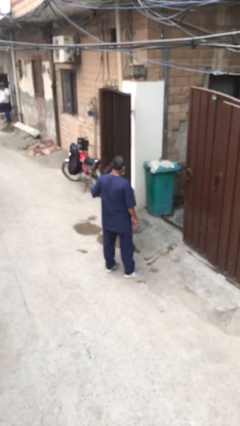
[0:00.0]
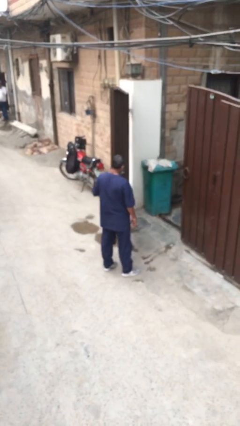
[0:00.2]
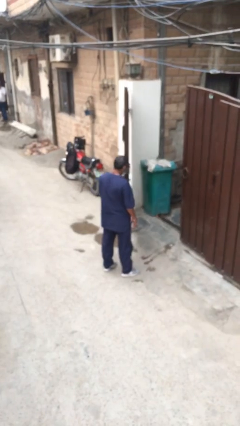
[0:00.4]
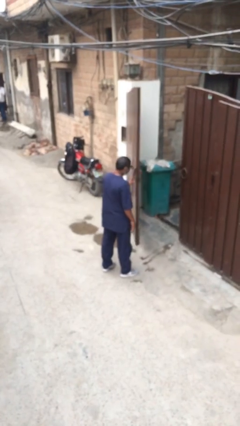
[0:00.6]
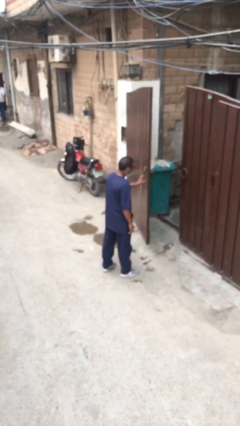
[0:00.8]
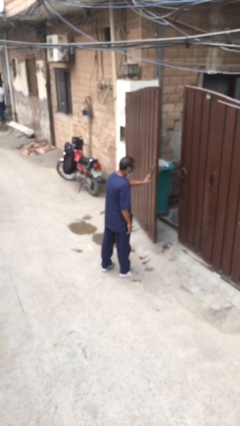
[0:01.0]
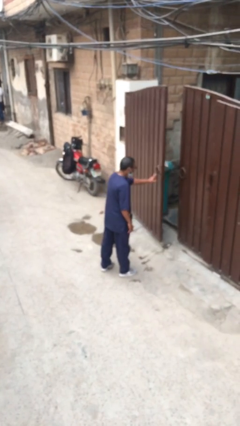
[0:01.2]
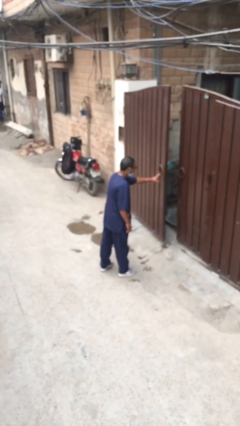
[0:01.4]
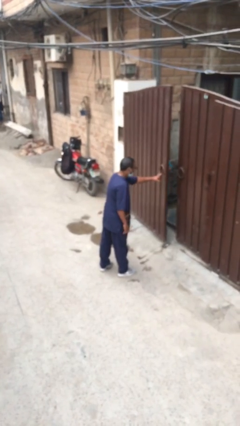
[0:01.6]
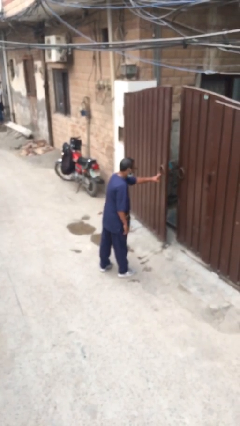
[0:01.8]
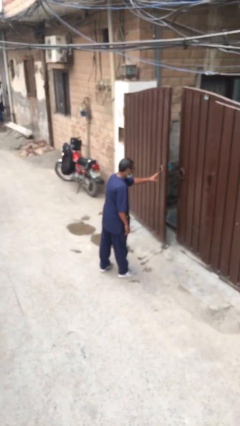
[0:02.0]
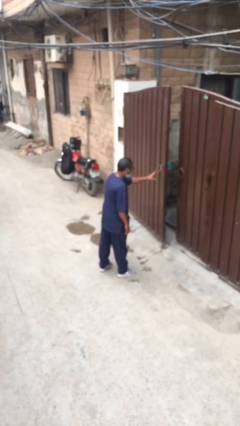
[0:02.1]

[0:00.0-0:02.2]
person closes facility door

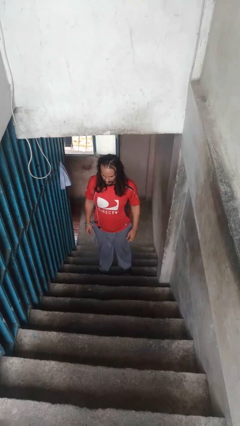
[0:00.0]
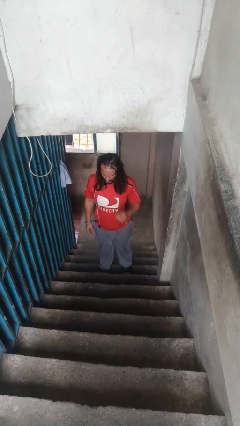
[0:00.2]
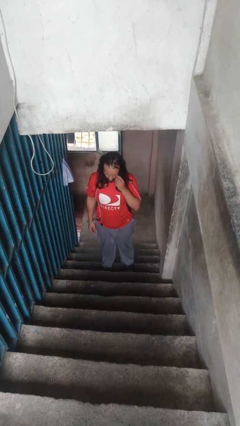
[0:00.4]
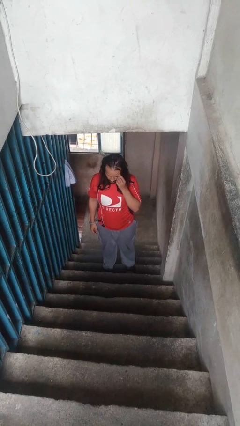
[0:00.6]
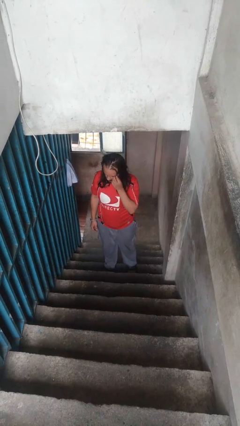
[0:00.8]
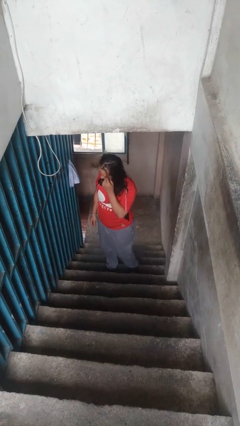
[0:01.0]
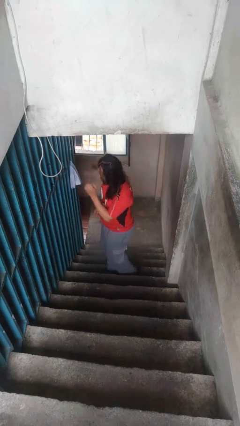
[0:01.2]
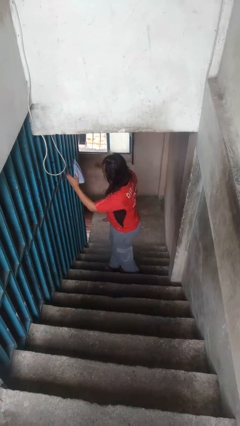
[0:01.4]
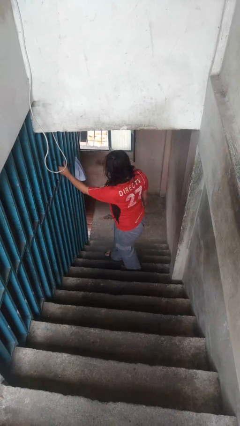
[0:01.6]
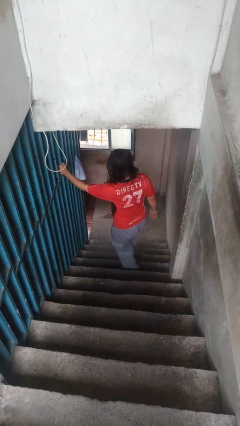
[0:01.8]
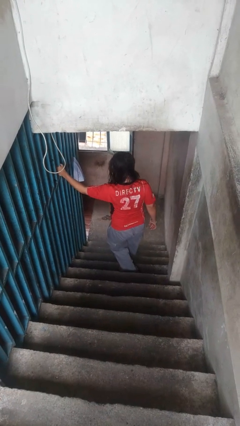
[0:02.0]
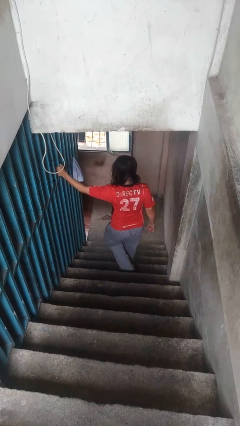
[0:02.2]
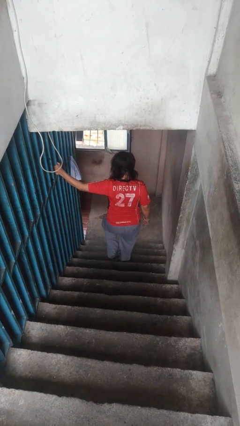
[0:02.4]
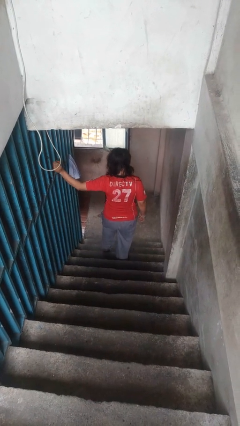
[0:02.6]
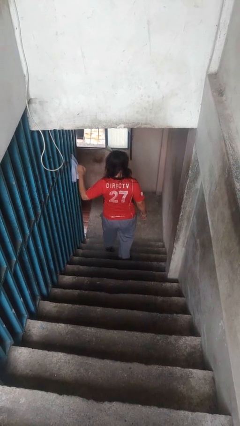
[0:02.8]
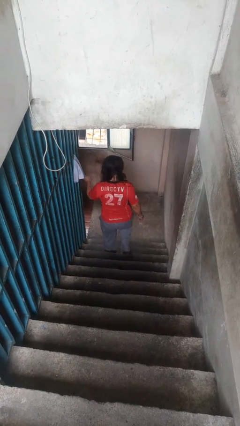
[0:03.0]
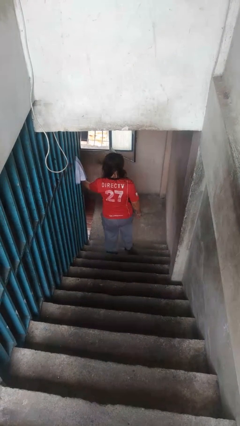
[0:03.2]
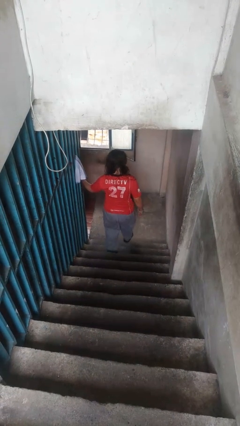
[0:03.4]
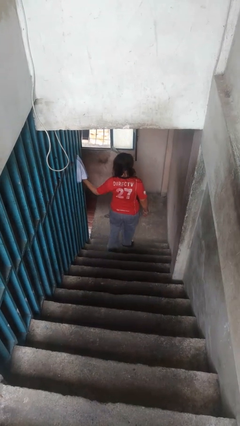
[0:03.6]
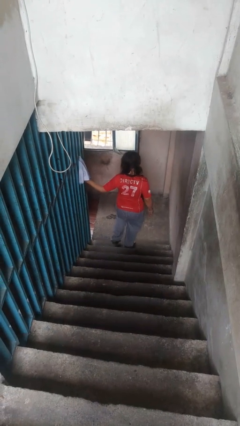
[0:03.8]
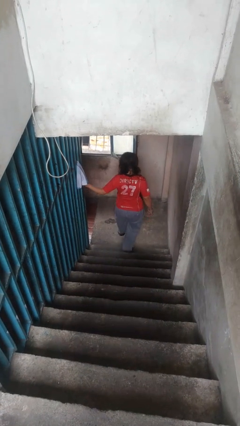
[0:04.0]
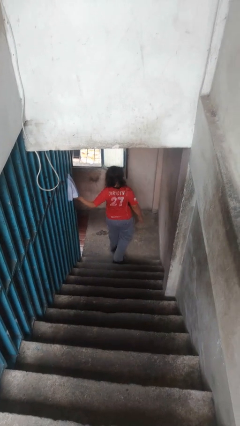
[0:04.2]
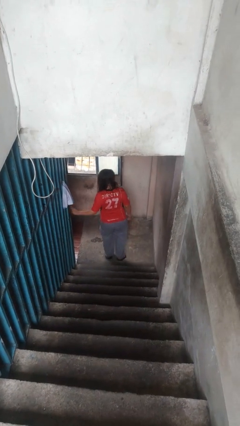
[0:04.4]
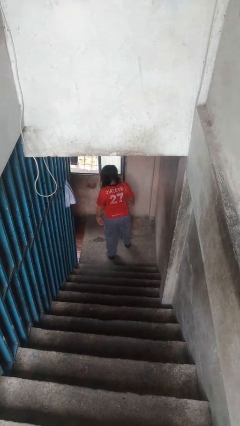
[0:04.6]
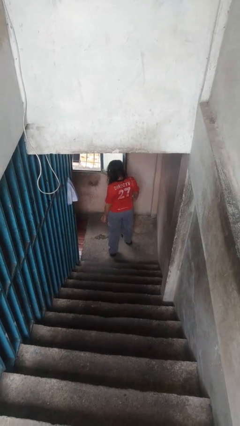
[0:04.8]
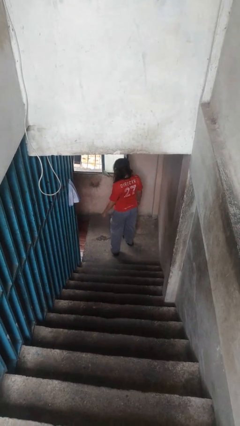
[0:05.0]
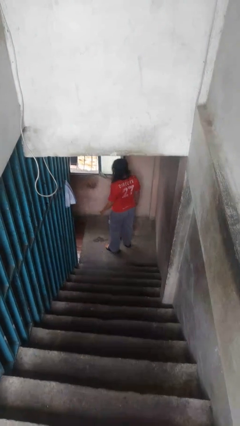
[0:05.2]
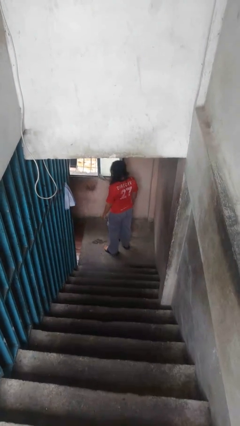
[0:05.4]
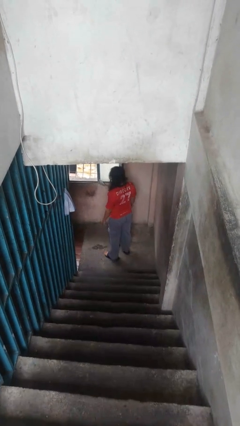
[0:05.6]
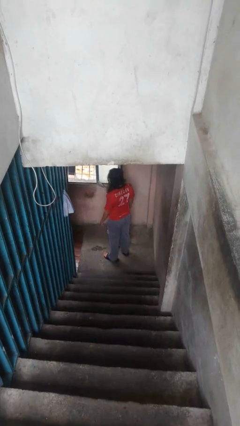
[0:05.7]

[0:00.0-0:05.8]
person climbs down stairs

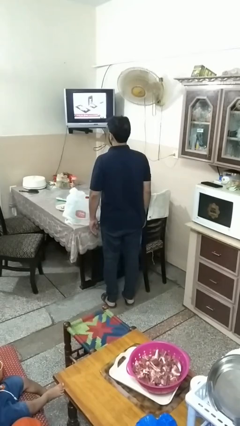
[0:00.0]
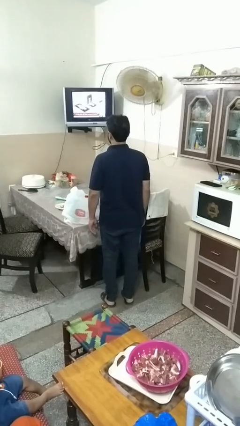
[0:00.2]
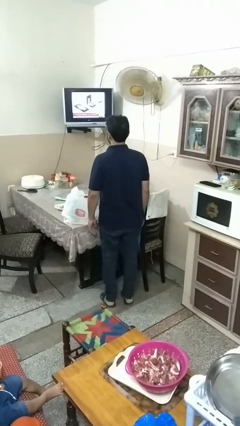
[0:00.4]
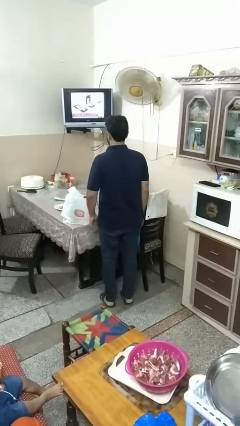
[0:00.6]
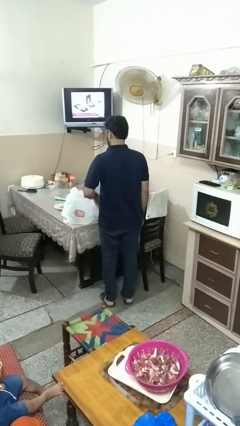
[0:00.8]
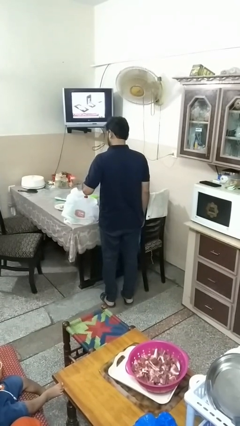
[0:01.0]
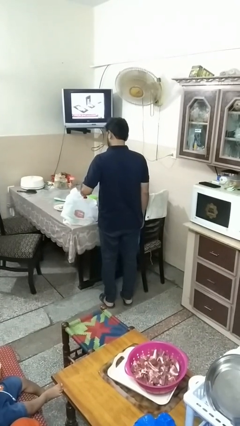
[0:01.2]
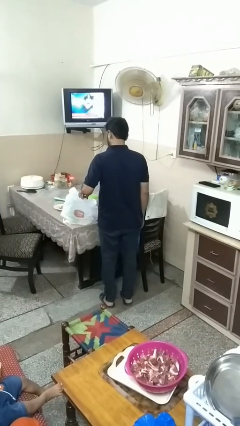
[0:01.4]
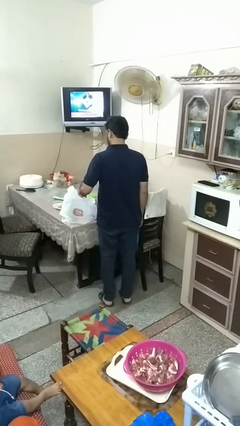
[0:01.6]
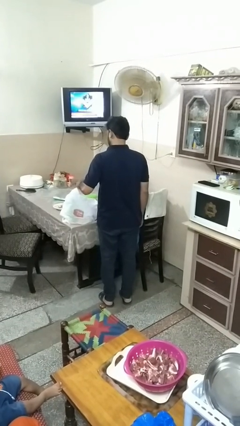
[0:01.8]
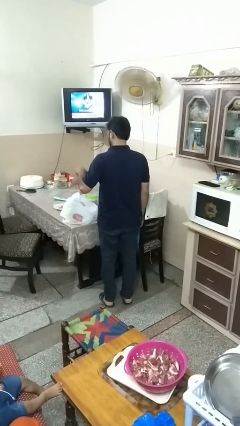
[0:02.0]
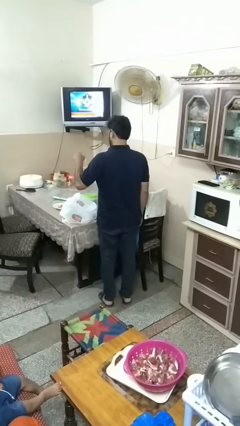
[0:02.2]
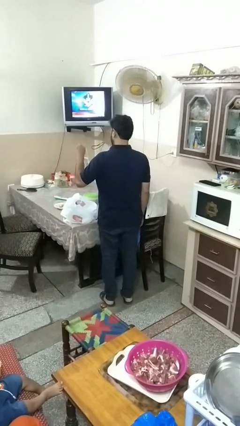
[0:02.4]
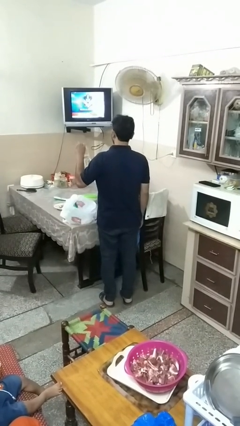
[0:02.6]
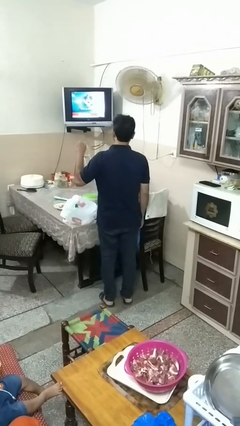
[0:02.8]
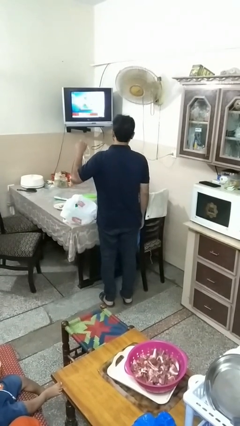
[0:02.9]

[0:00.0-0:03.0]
person takes object from bag

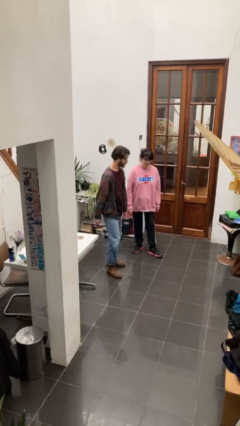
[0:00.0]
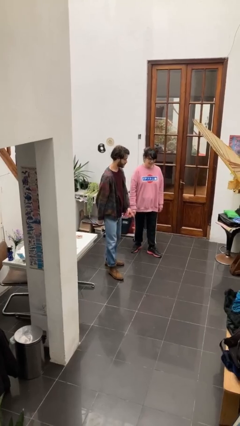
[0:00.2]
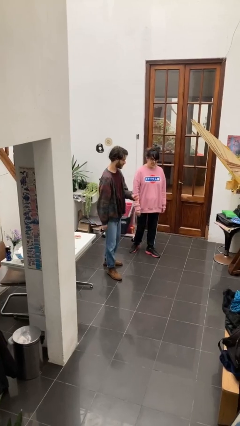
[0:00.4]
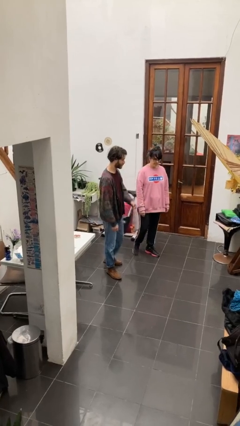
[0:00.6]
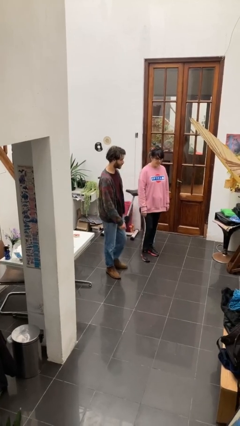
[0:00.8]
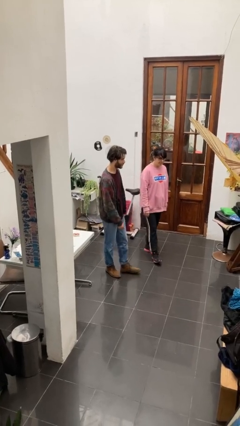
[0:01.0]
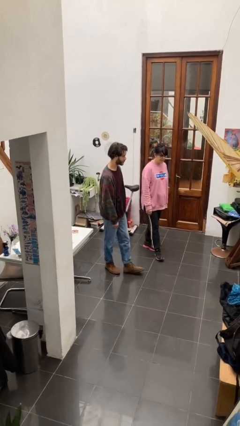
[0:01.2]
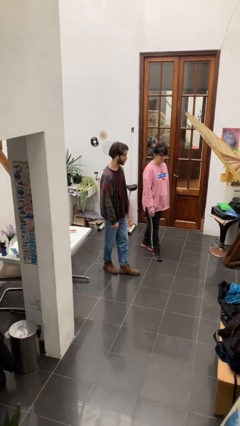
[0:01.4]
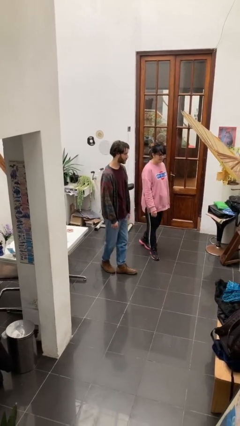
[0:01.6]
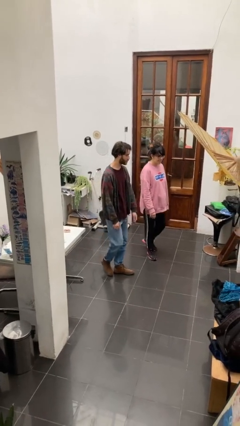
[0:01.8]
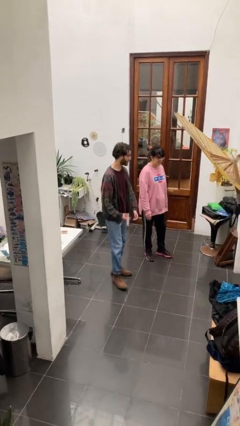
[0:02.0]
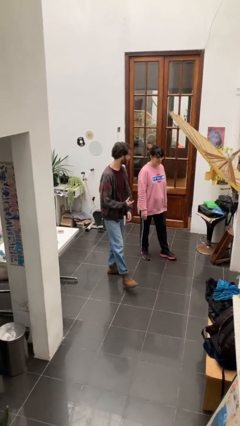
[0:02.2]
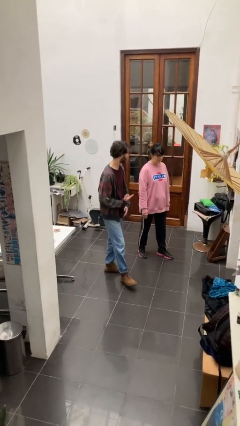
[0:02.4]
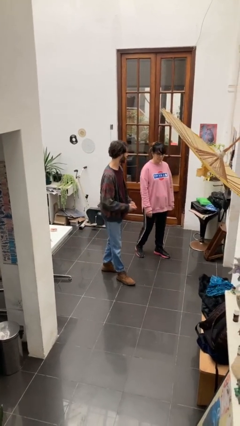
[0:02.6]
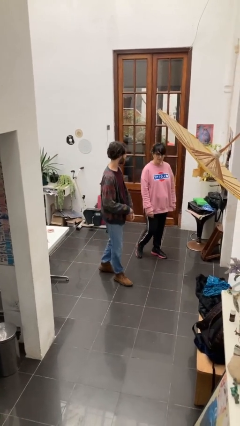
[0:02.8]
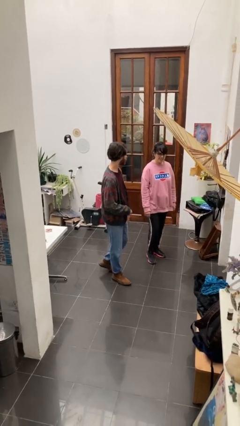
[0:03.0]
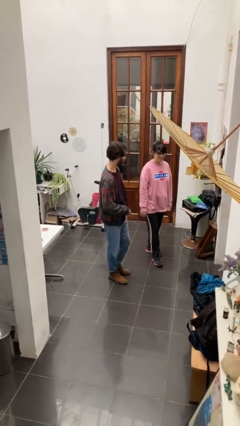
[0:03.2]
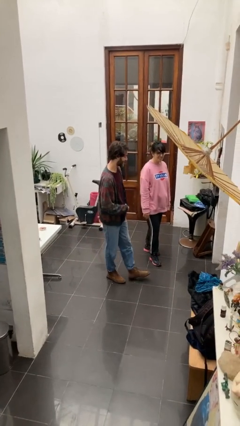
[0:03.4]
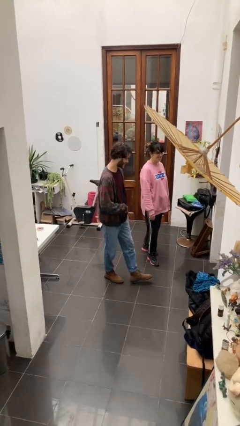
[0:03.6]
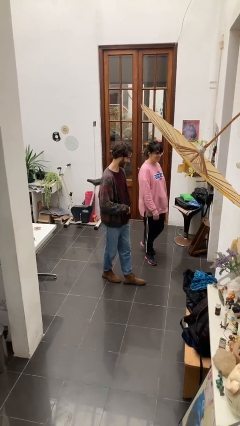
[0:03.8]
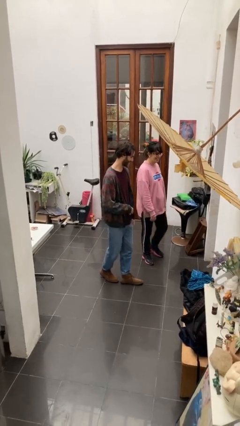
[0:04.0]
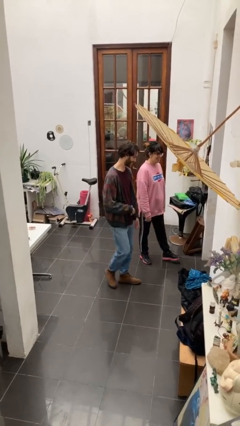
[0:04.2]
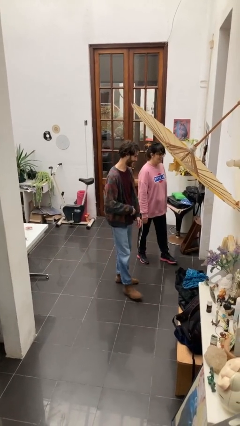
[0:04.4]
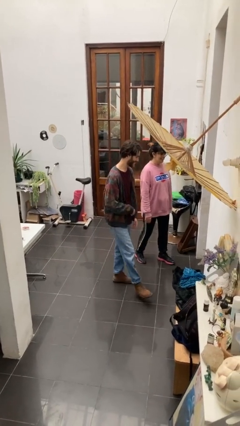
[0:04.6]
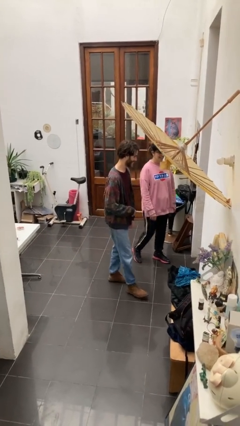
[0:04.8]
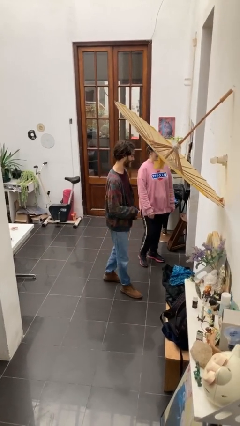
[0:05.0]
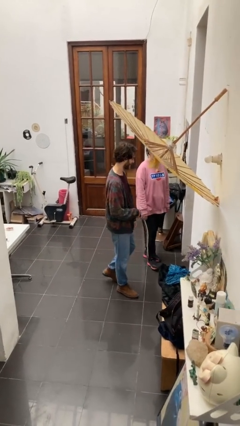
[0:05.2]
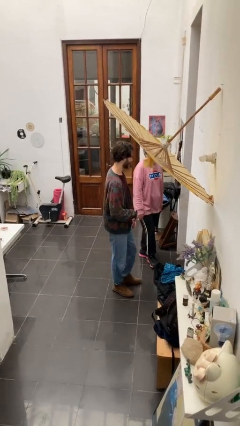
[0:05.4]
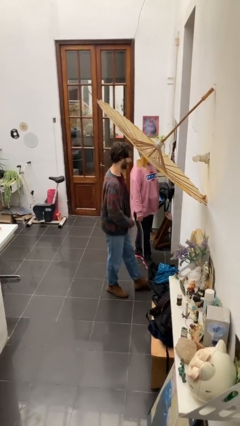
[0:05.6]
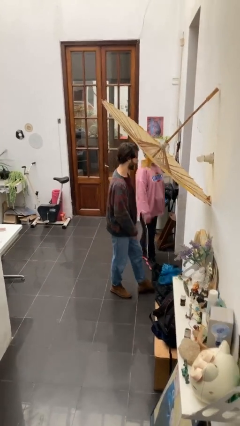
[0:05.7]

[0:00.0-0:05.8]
person talks to person

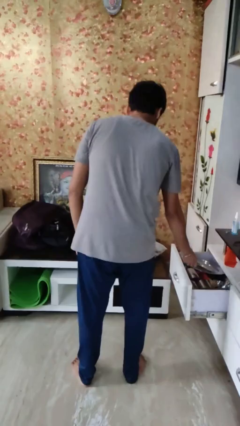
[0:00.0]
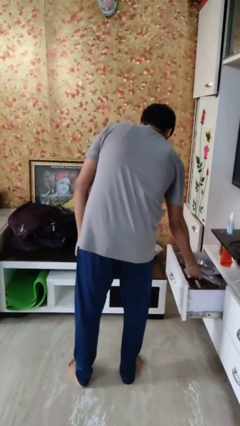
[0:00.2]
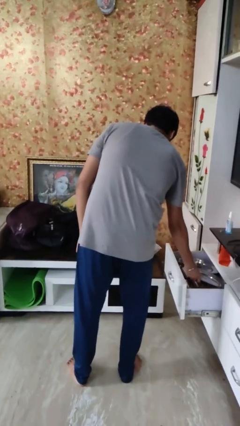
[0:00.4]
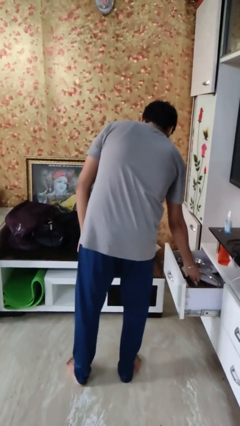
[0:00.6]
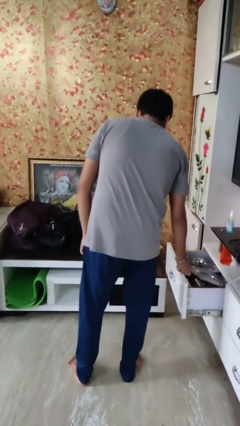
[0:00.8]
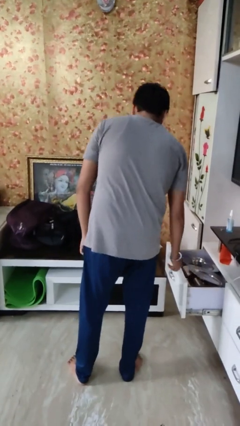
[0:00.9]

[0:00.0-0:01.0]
person puts object into kitchen drawer
